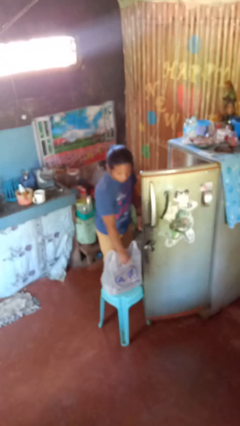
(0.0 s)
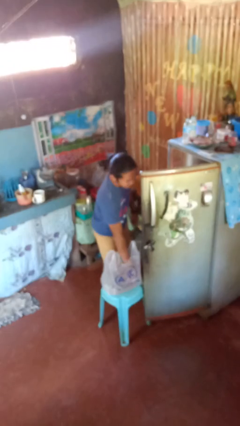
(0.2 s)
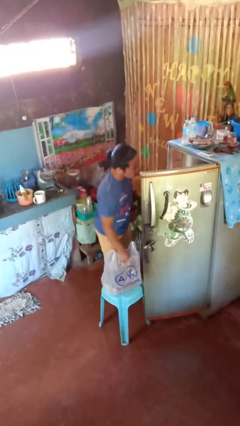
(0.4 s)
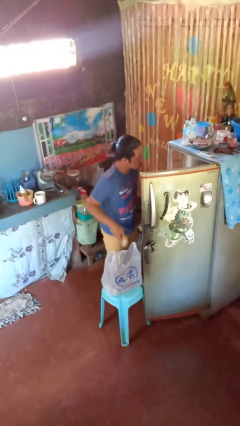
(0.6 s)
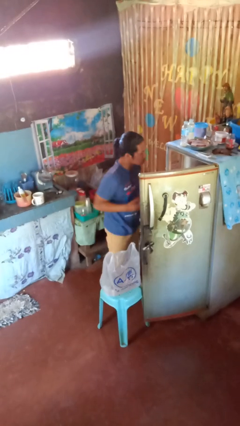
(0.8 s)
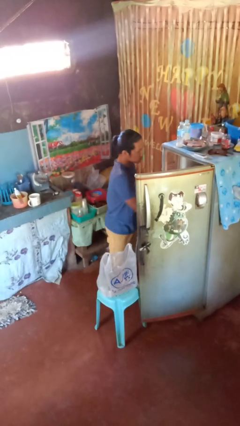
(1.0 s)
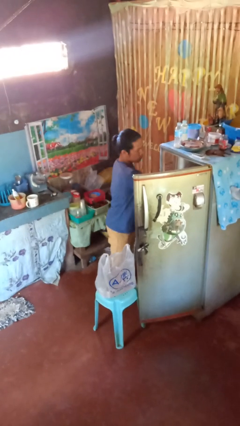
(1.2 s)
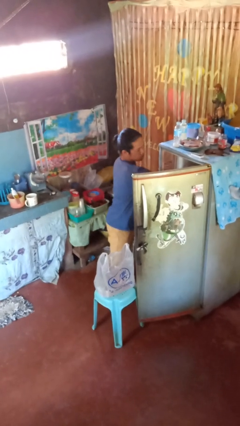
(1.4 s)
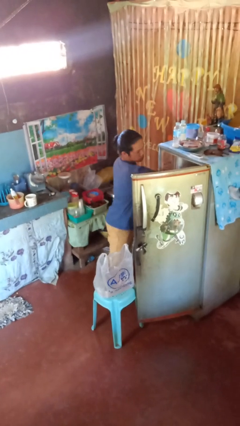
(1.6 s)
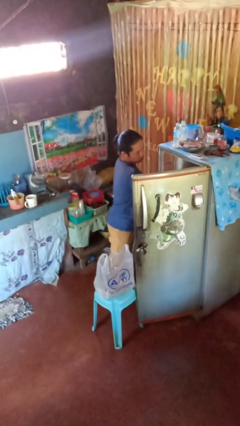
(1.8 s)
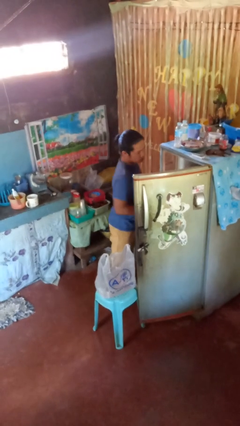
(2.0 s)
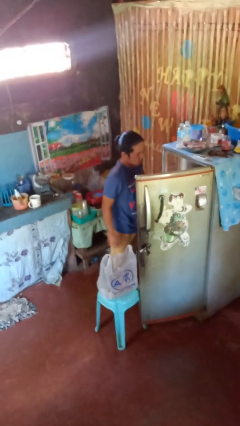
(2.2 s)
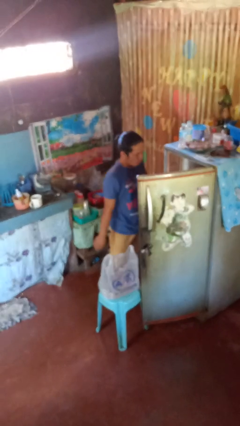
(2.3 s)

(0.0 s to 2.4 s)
person loads groceries into refrigerator

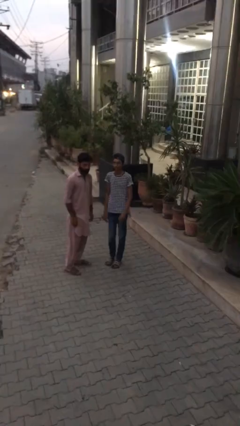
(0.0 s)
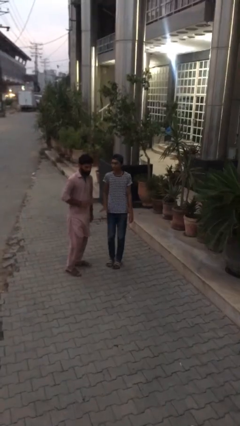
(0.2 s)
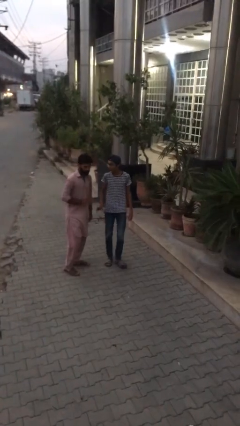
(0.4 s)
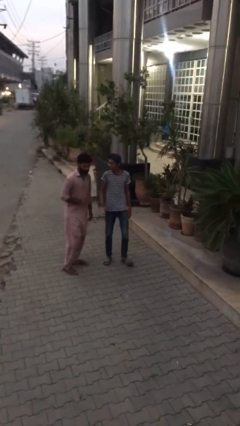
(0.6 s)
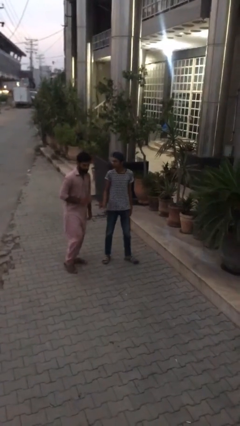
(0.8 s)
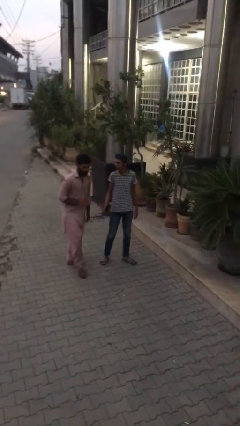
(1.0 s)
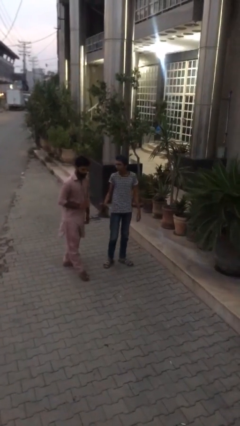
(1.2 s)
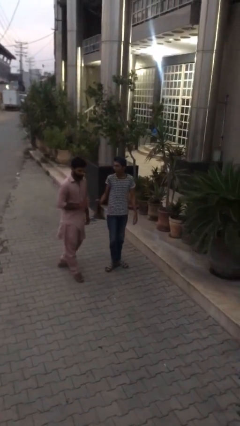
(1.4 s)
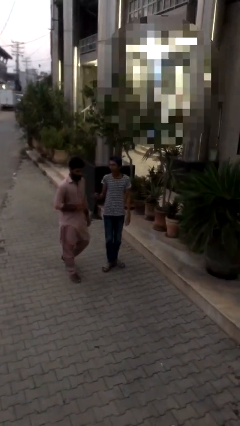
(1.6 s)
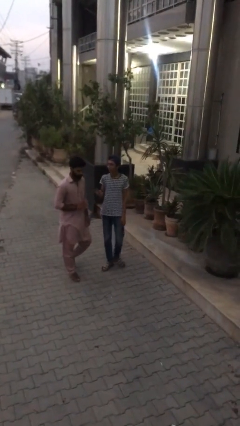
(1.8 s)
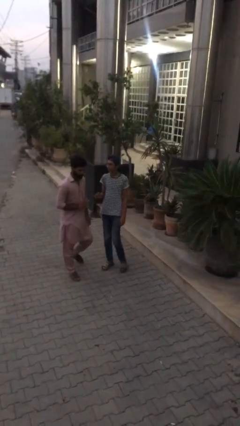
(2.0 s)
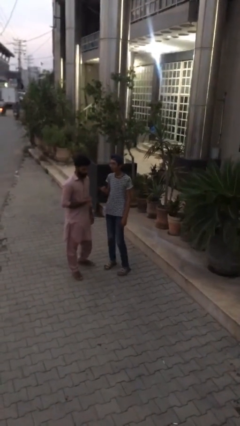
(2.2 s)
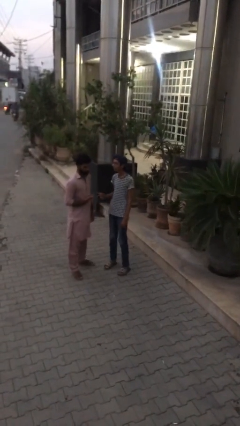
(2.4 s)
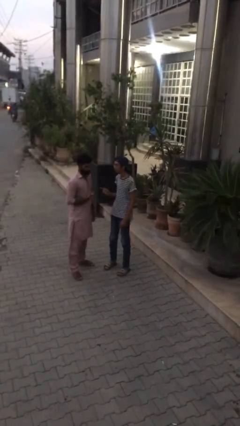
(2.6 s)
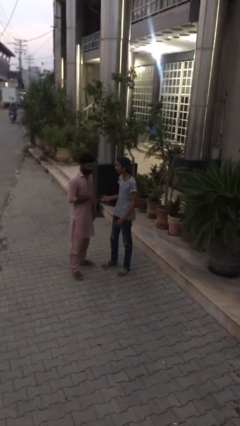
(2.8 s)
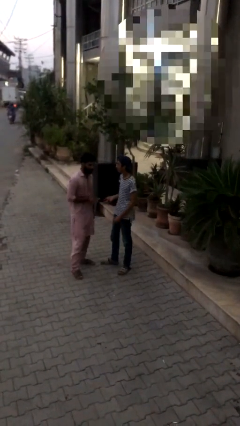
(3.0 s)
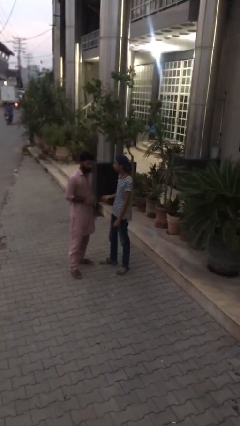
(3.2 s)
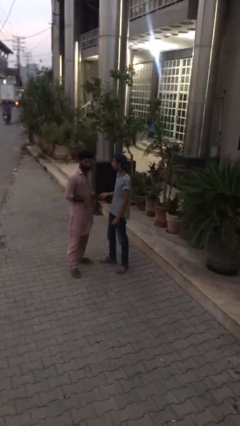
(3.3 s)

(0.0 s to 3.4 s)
person talks to person

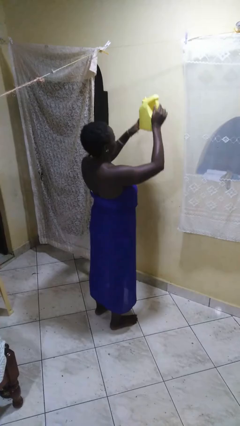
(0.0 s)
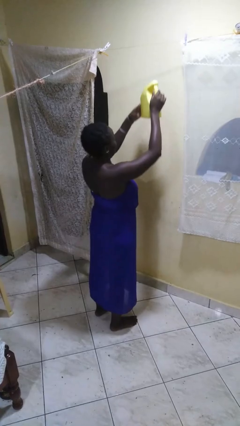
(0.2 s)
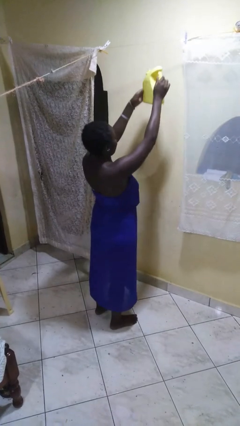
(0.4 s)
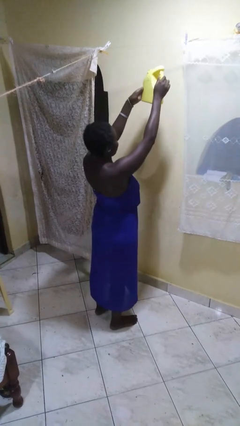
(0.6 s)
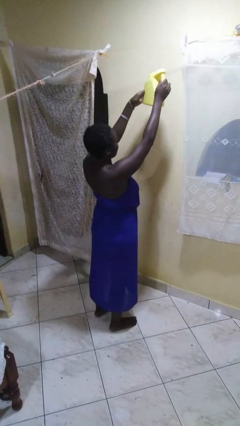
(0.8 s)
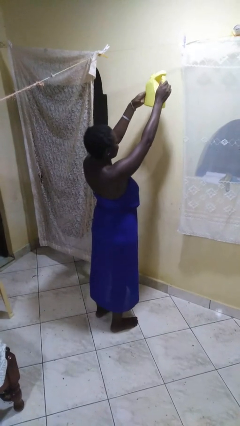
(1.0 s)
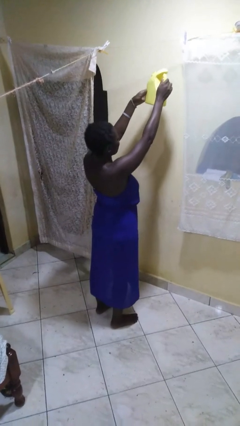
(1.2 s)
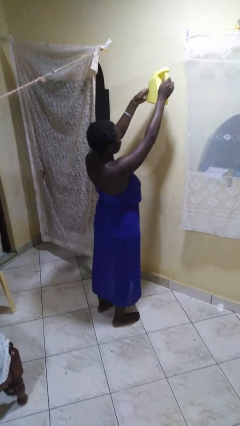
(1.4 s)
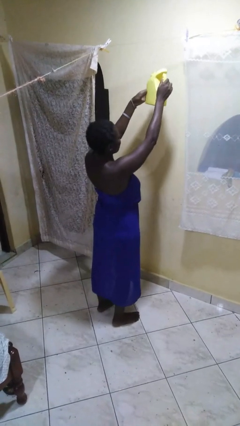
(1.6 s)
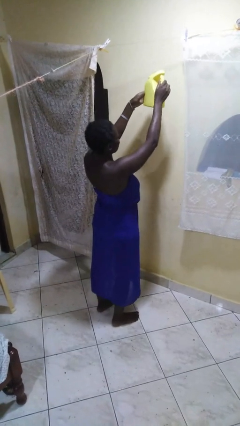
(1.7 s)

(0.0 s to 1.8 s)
person holds object above head

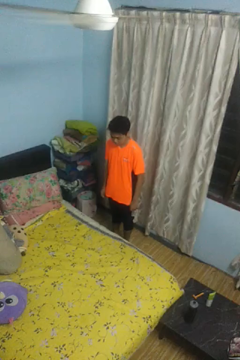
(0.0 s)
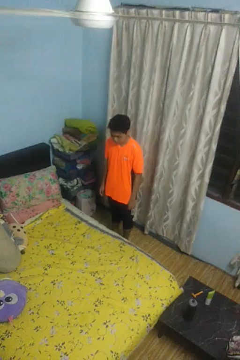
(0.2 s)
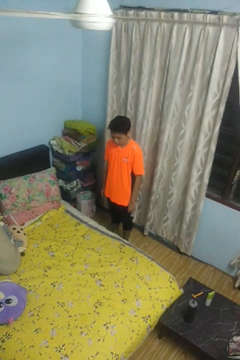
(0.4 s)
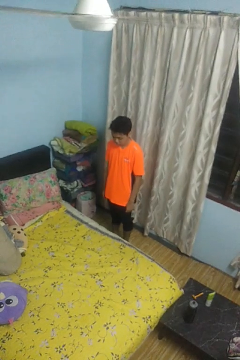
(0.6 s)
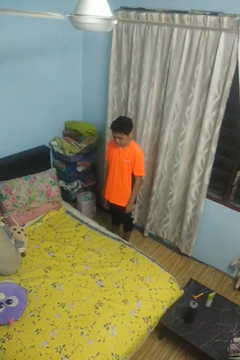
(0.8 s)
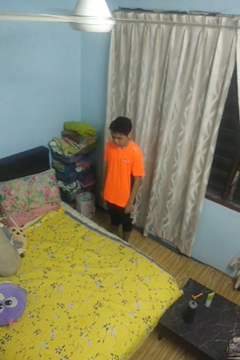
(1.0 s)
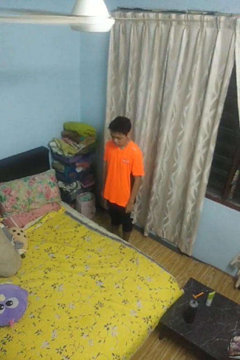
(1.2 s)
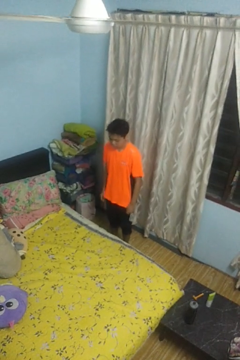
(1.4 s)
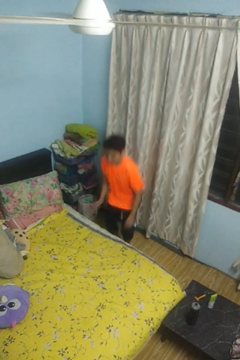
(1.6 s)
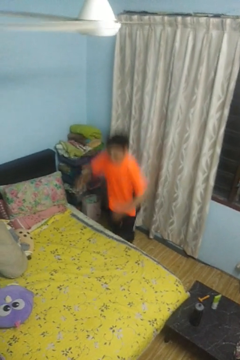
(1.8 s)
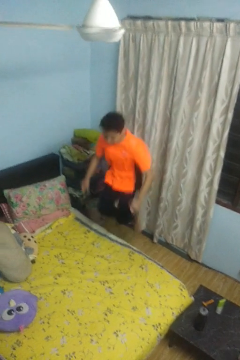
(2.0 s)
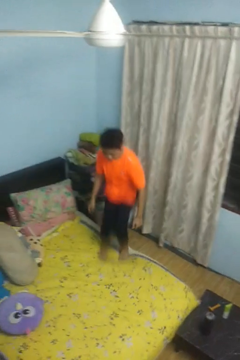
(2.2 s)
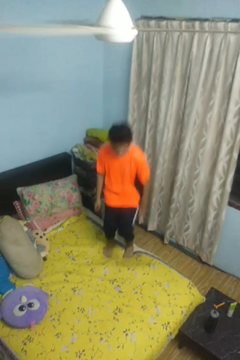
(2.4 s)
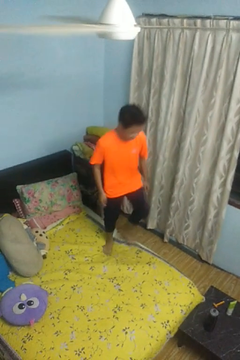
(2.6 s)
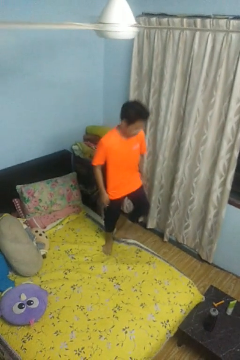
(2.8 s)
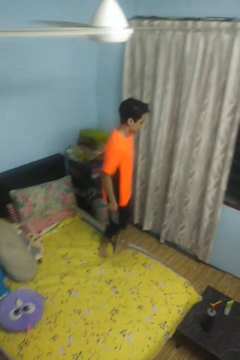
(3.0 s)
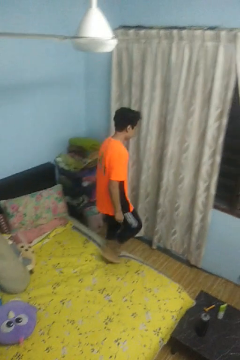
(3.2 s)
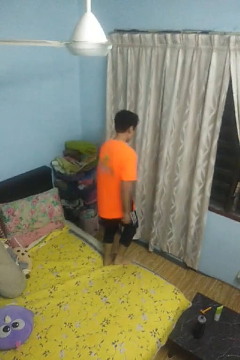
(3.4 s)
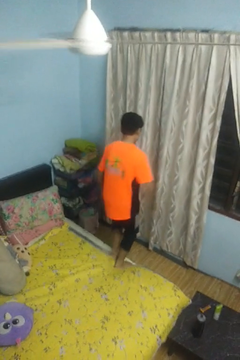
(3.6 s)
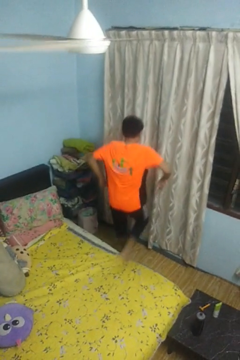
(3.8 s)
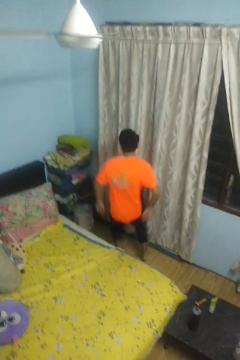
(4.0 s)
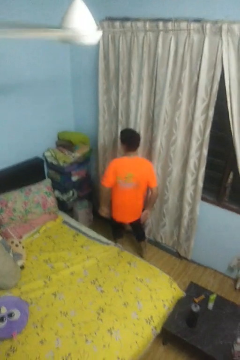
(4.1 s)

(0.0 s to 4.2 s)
person jumps on bed

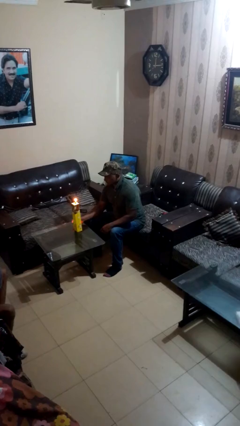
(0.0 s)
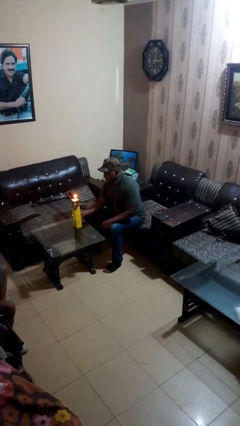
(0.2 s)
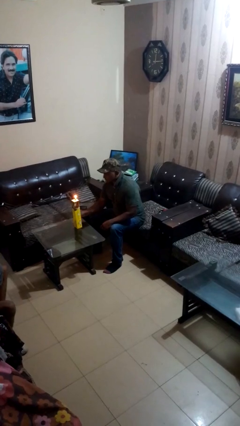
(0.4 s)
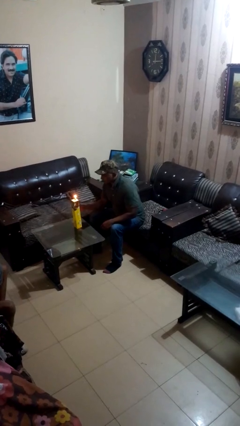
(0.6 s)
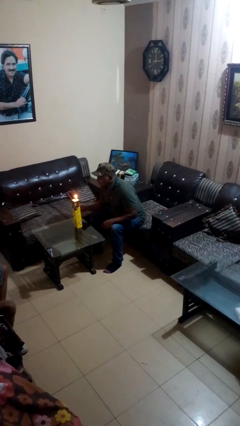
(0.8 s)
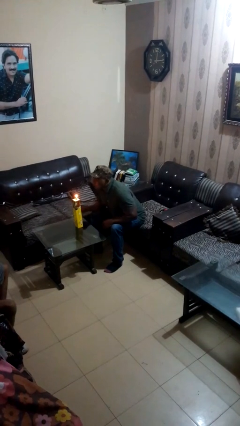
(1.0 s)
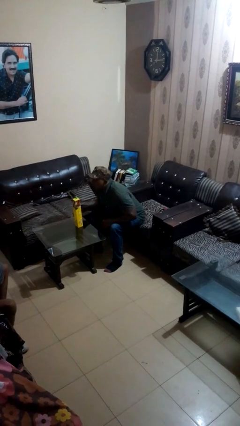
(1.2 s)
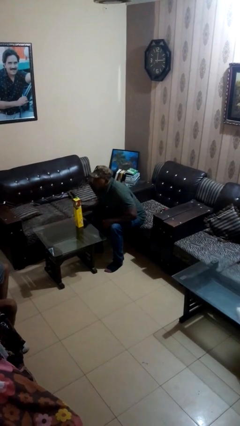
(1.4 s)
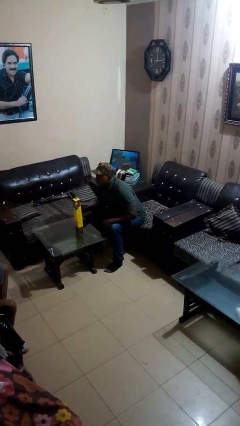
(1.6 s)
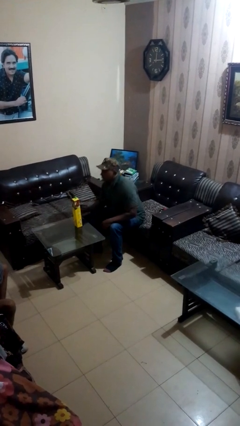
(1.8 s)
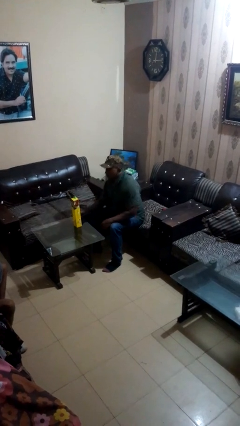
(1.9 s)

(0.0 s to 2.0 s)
person extinguishes candle

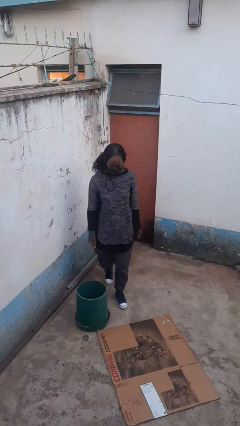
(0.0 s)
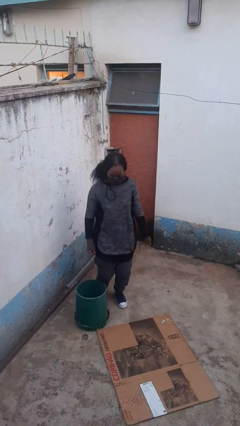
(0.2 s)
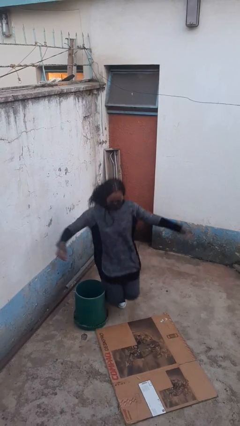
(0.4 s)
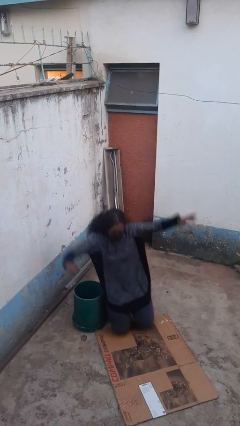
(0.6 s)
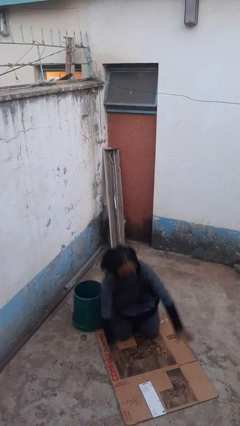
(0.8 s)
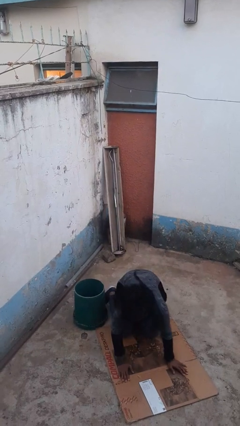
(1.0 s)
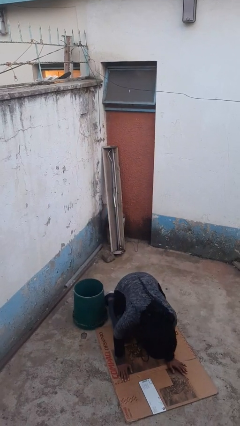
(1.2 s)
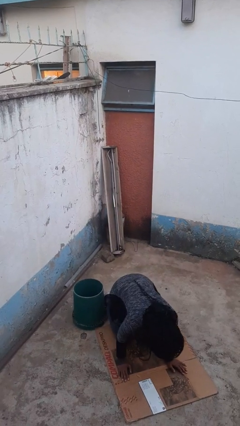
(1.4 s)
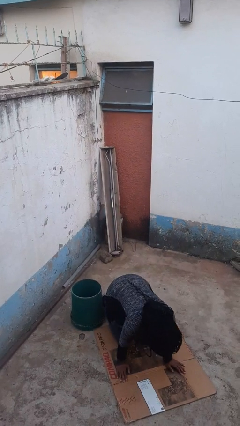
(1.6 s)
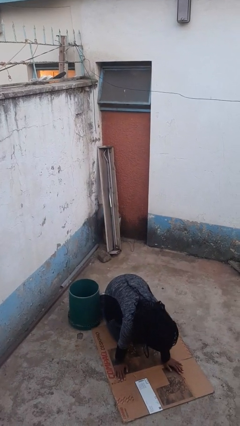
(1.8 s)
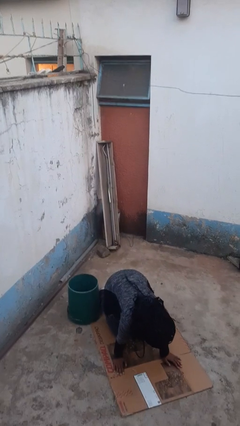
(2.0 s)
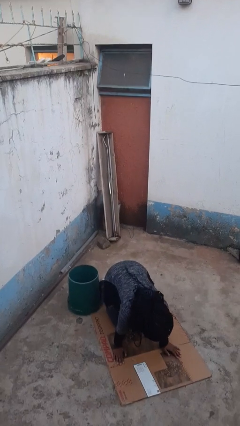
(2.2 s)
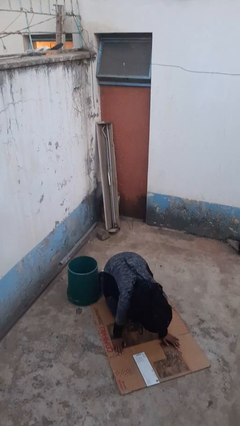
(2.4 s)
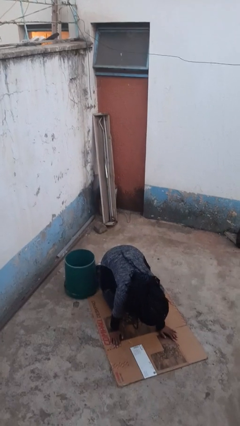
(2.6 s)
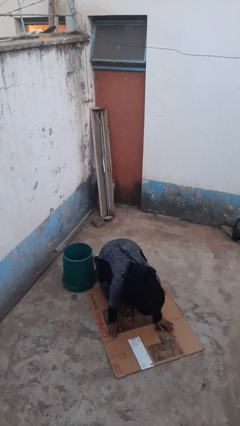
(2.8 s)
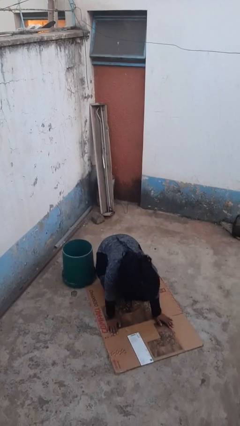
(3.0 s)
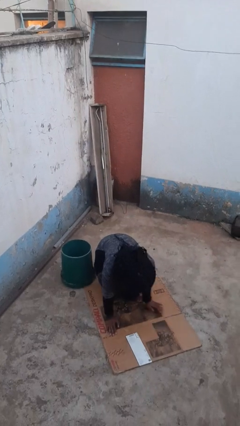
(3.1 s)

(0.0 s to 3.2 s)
person trips on object on floor

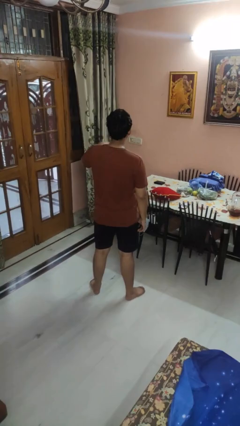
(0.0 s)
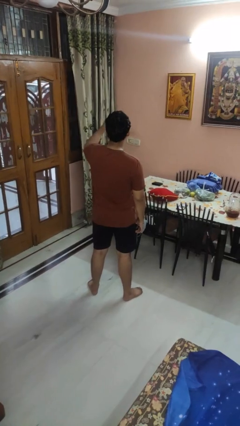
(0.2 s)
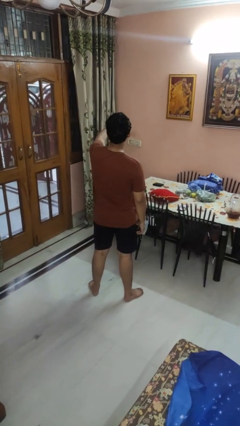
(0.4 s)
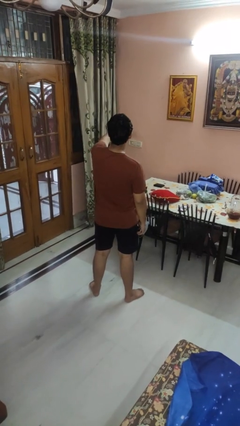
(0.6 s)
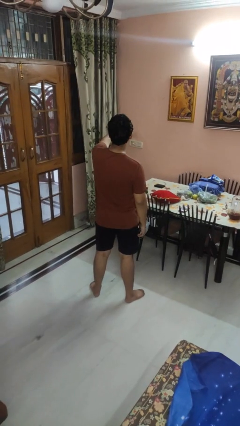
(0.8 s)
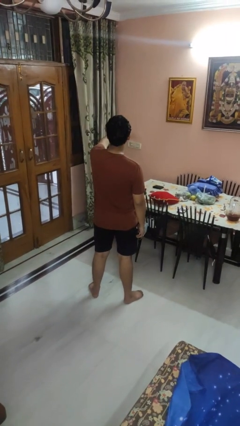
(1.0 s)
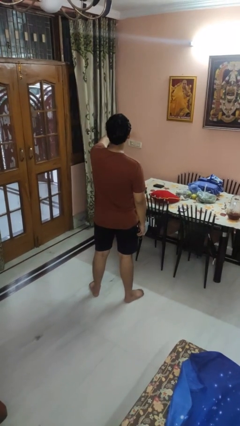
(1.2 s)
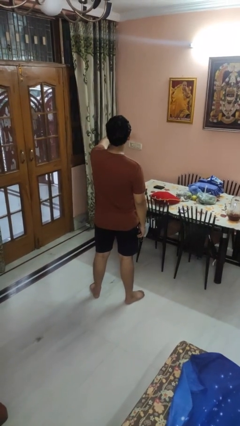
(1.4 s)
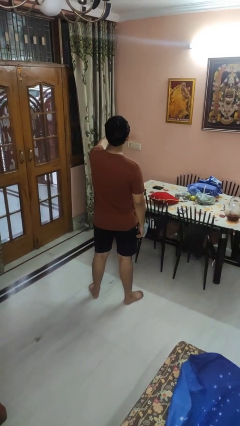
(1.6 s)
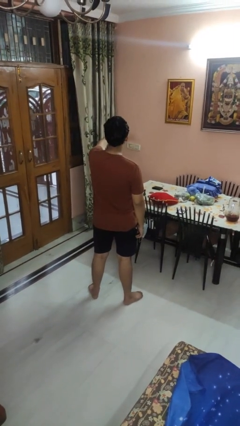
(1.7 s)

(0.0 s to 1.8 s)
person gestures stop
